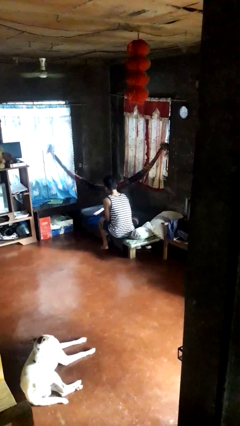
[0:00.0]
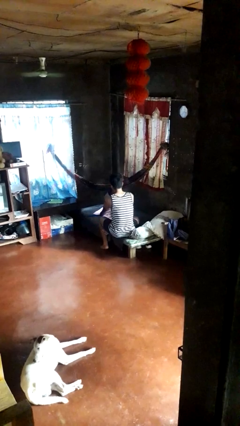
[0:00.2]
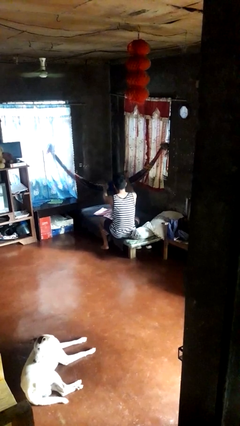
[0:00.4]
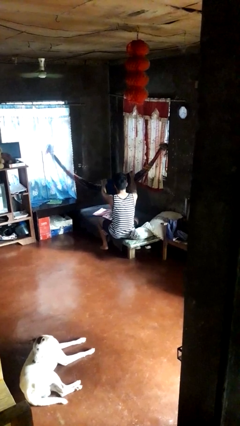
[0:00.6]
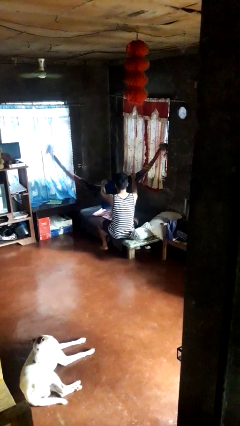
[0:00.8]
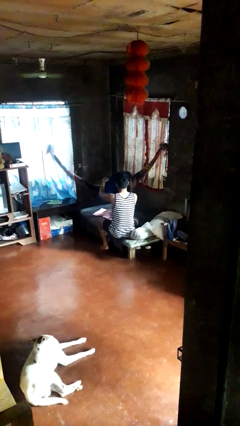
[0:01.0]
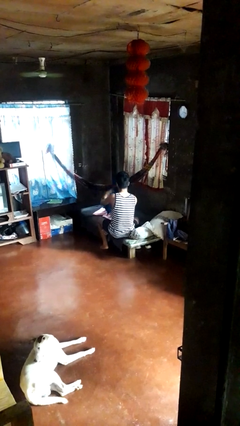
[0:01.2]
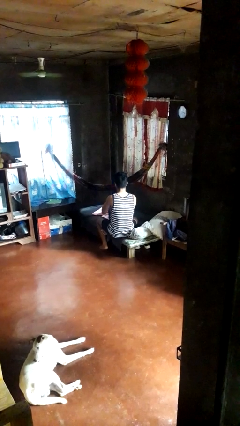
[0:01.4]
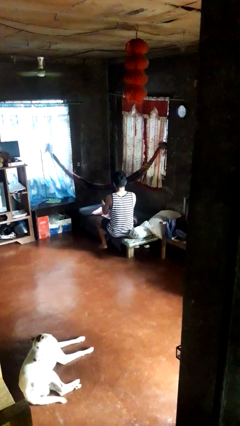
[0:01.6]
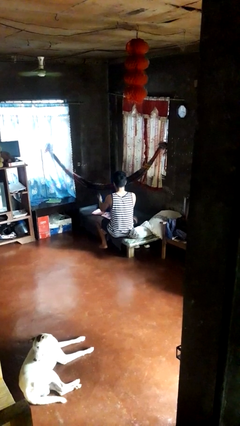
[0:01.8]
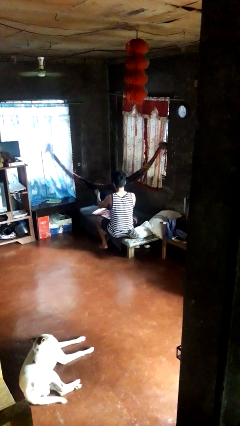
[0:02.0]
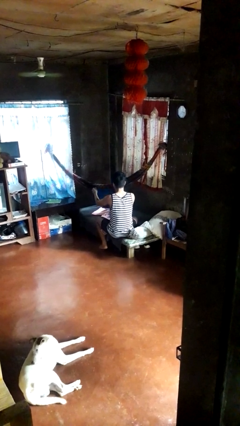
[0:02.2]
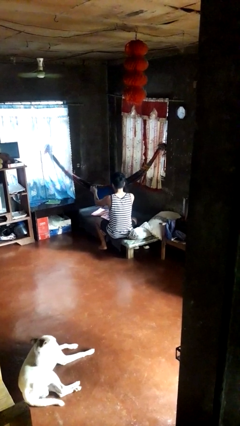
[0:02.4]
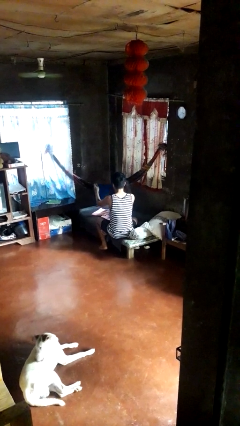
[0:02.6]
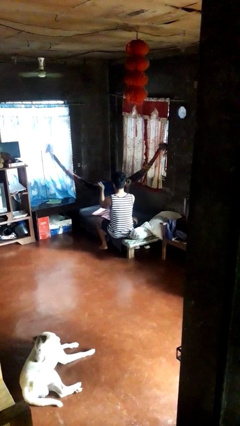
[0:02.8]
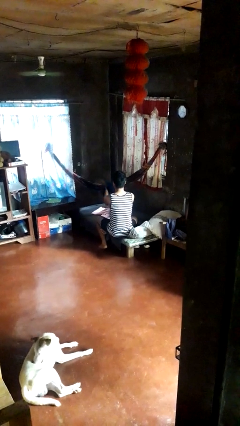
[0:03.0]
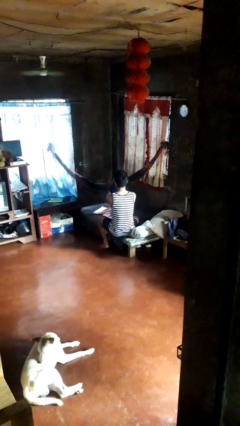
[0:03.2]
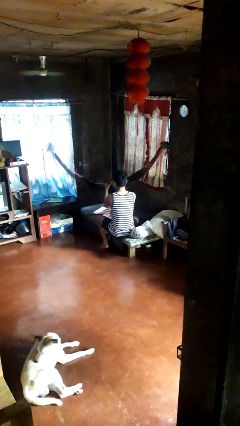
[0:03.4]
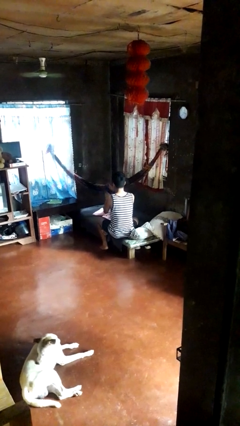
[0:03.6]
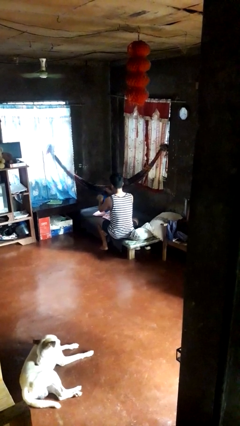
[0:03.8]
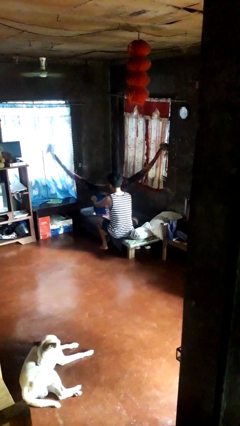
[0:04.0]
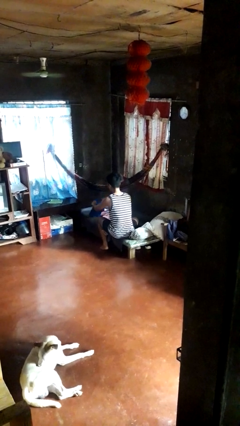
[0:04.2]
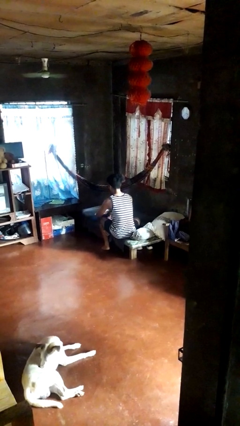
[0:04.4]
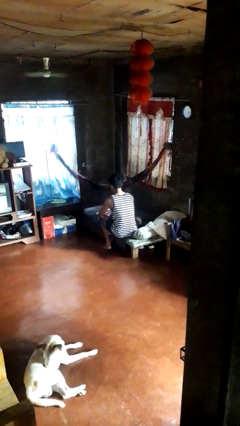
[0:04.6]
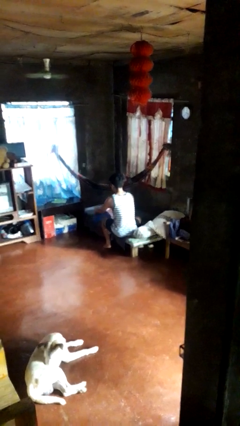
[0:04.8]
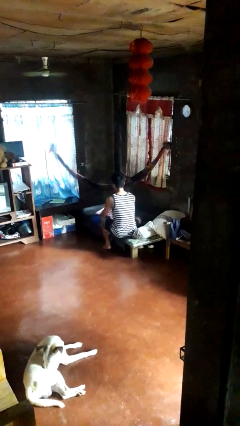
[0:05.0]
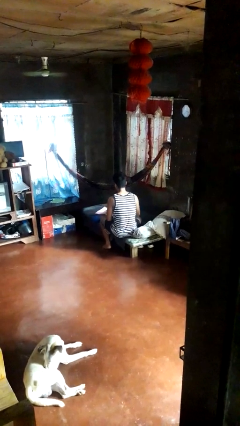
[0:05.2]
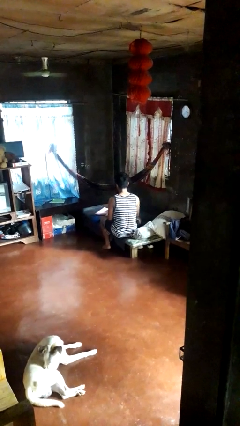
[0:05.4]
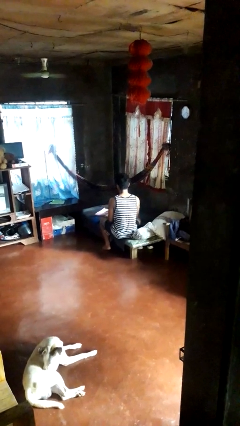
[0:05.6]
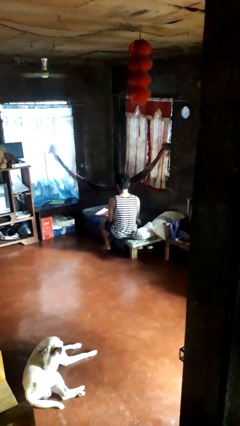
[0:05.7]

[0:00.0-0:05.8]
person folds shirt

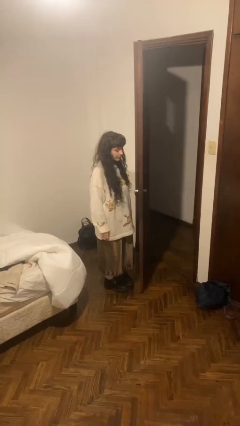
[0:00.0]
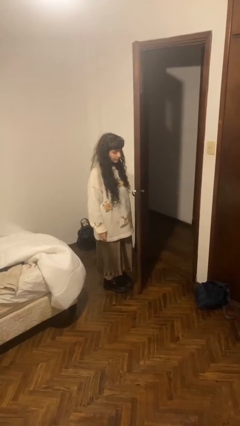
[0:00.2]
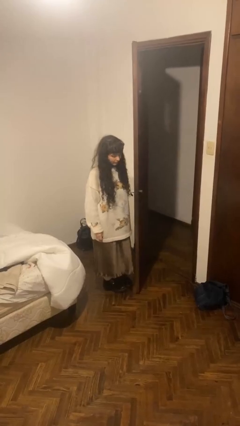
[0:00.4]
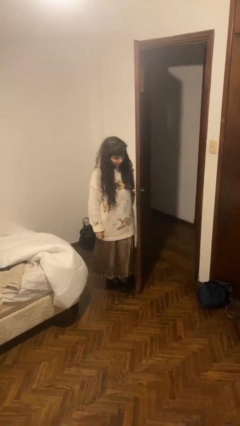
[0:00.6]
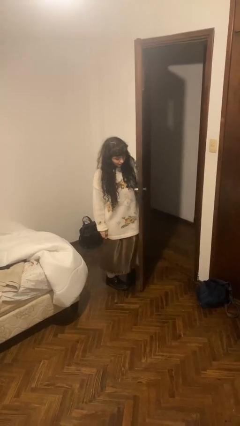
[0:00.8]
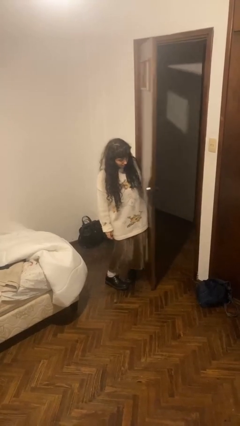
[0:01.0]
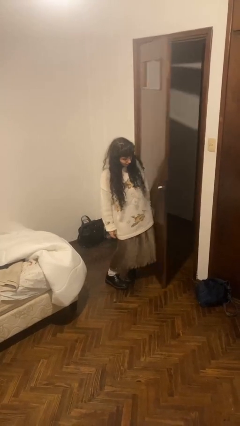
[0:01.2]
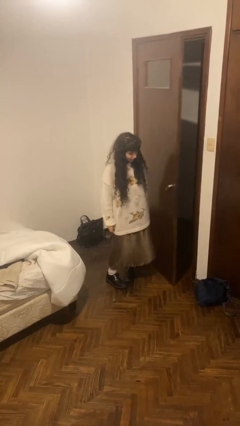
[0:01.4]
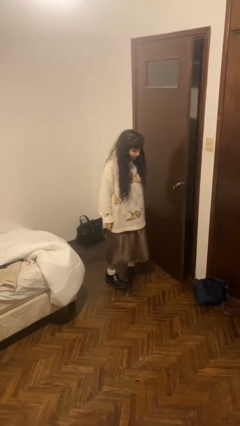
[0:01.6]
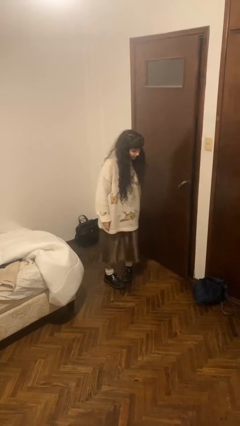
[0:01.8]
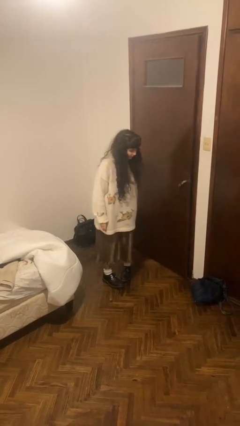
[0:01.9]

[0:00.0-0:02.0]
person closes door with hip

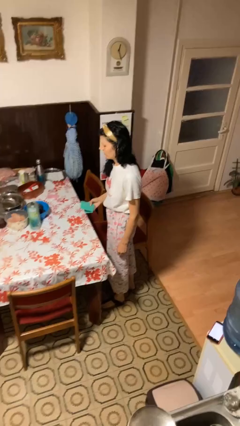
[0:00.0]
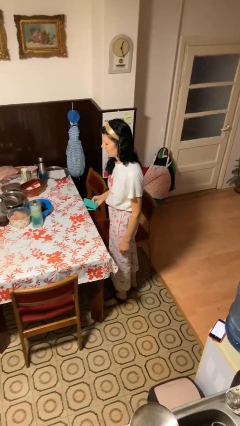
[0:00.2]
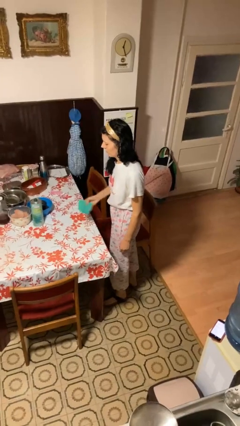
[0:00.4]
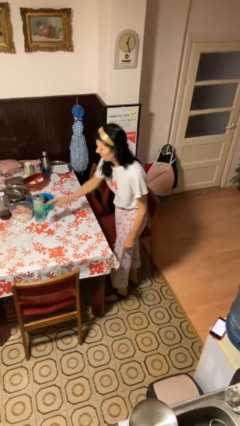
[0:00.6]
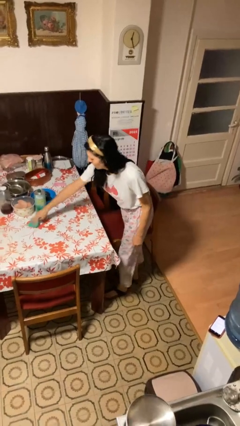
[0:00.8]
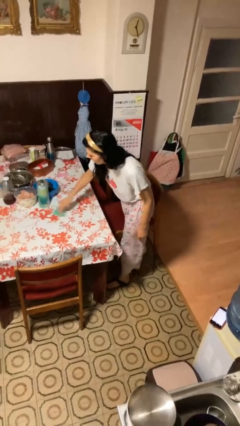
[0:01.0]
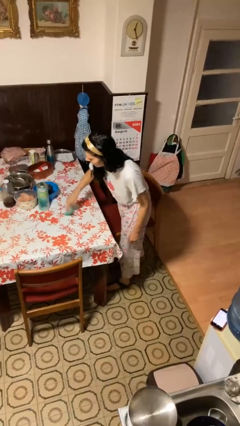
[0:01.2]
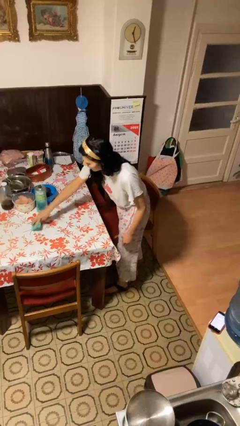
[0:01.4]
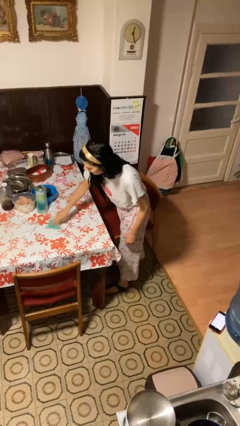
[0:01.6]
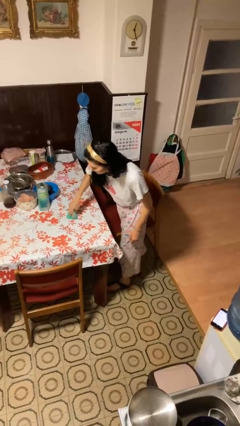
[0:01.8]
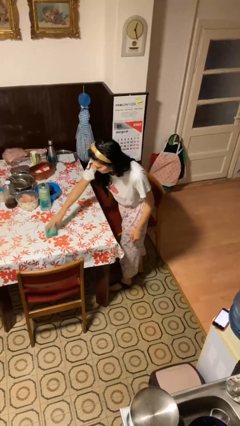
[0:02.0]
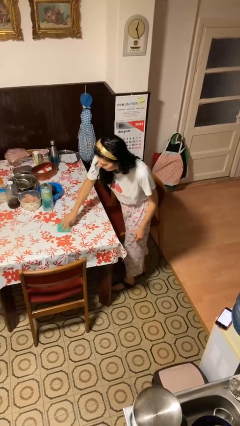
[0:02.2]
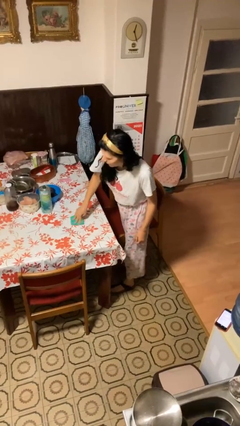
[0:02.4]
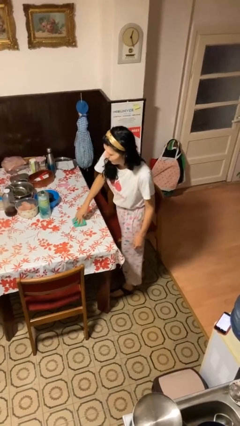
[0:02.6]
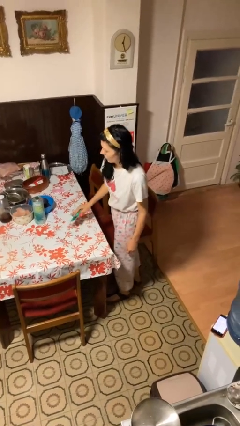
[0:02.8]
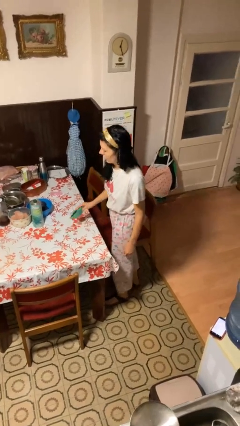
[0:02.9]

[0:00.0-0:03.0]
person cleans table with rag

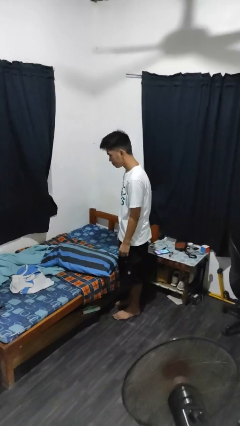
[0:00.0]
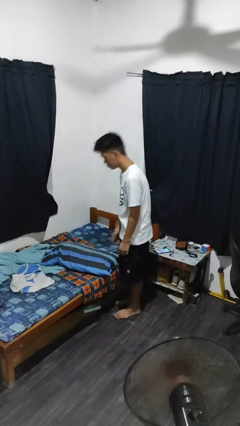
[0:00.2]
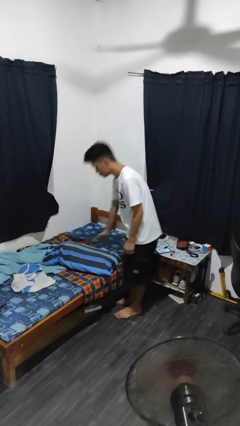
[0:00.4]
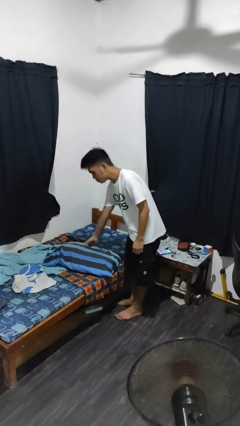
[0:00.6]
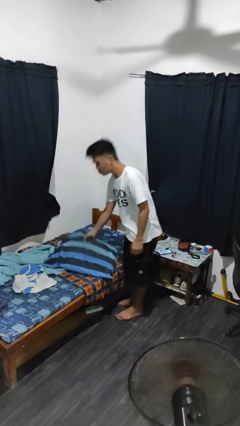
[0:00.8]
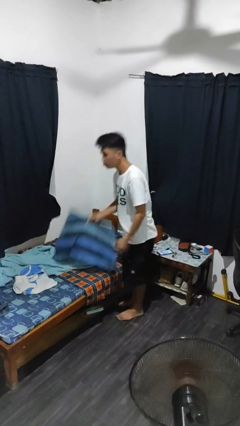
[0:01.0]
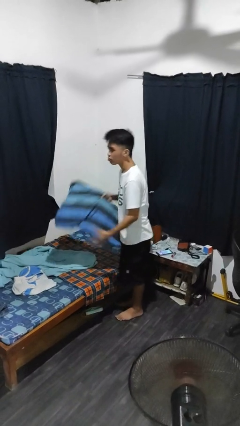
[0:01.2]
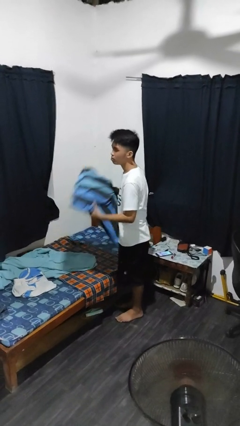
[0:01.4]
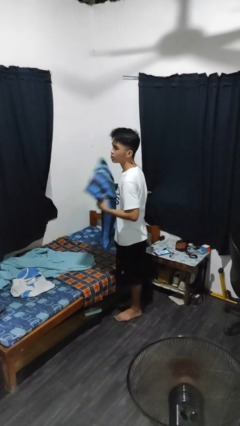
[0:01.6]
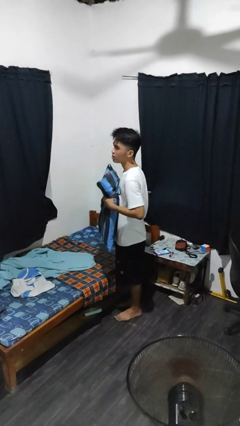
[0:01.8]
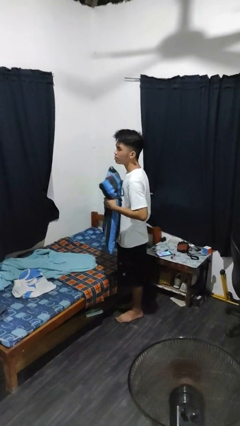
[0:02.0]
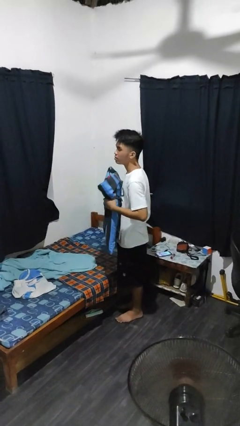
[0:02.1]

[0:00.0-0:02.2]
person picks up object from bed

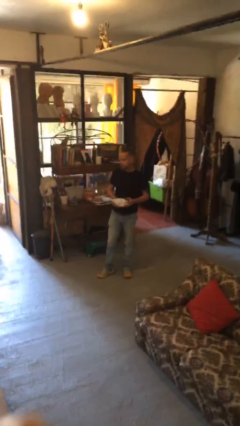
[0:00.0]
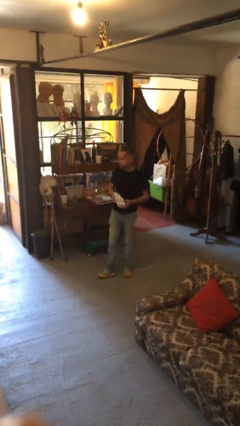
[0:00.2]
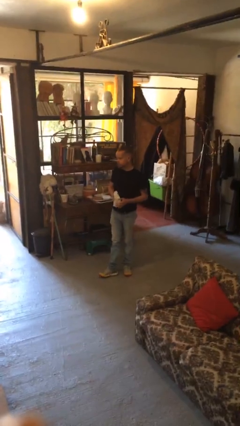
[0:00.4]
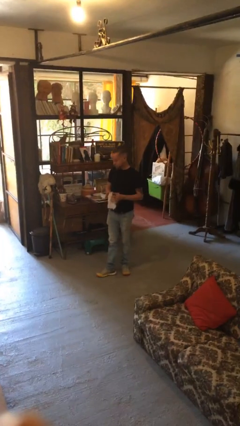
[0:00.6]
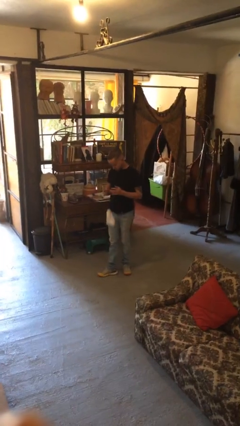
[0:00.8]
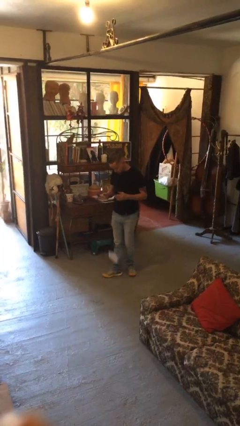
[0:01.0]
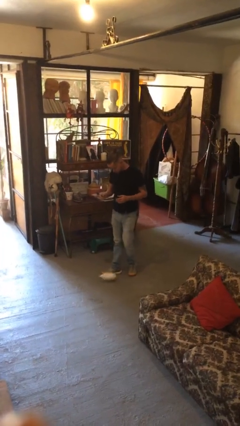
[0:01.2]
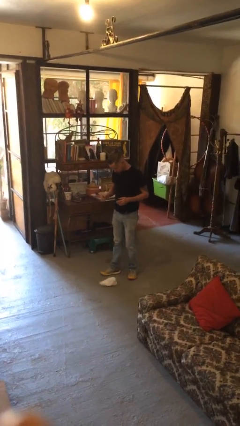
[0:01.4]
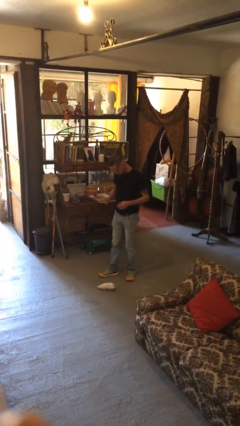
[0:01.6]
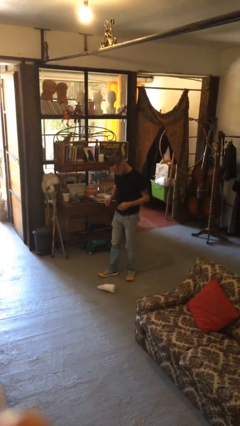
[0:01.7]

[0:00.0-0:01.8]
person drops object

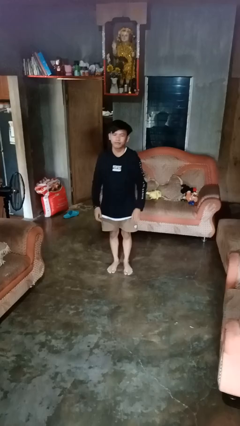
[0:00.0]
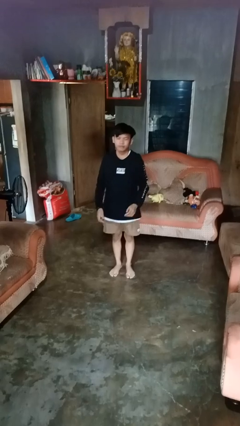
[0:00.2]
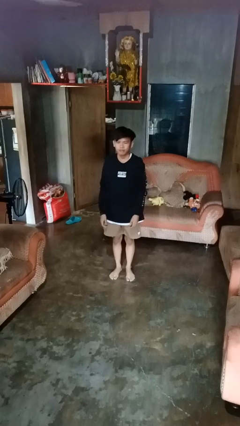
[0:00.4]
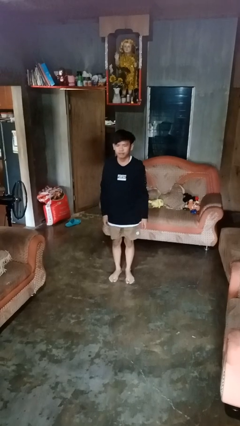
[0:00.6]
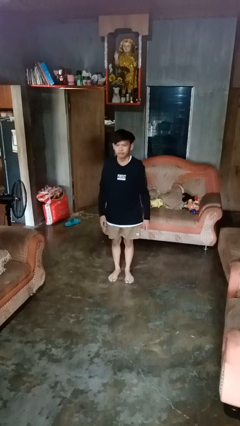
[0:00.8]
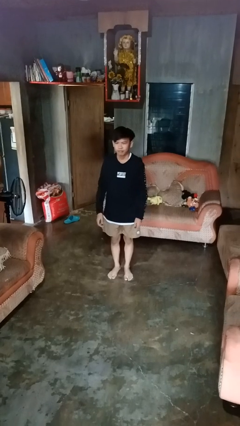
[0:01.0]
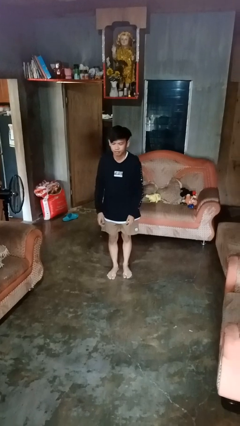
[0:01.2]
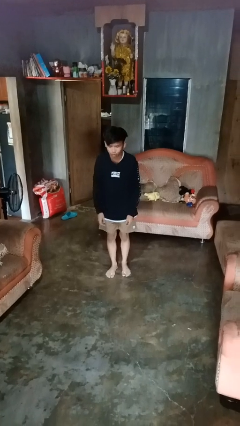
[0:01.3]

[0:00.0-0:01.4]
person stands up from floor

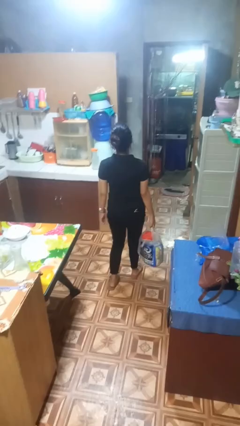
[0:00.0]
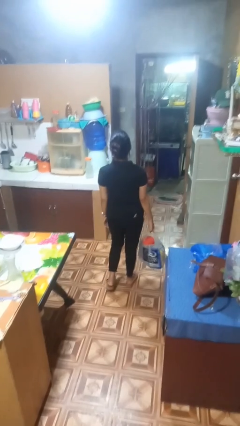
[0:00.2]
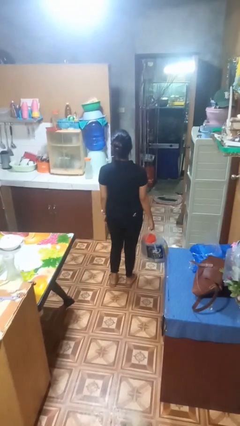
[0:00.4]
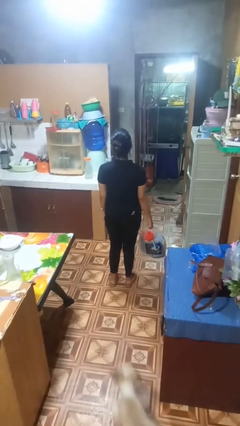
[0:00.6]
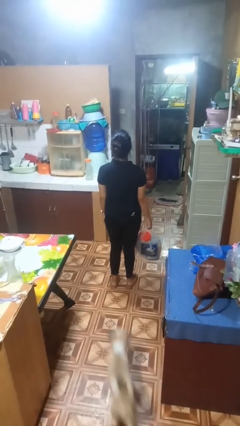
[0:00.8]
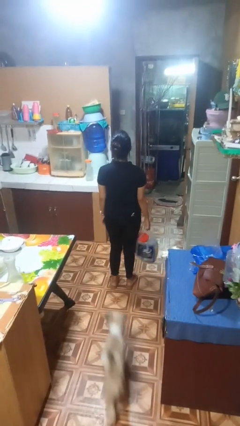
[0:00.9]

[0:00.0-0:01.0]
person carries groceries
